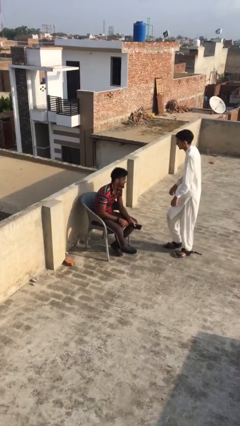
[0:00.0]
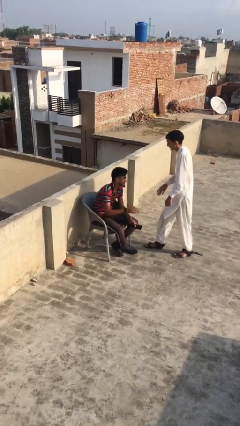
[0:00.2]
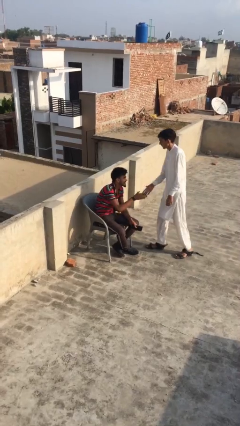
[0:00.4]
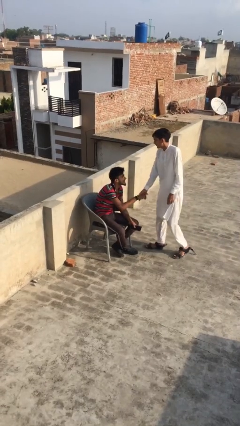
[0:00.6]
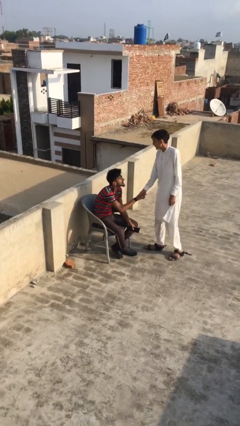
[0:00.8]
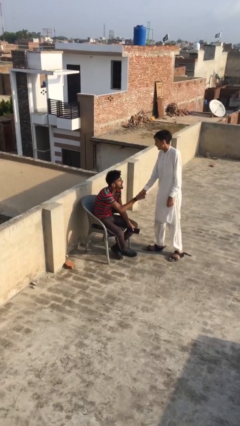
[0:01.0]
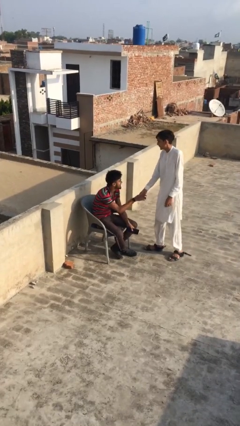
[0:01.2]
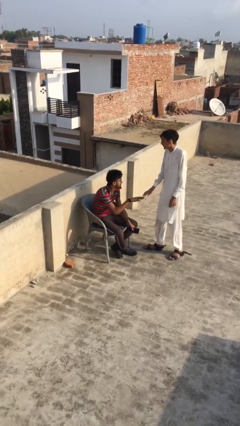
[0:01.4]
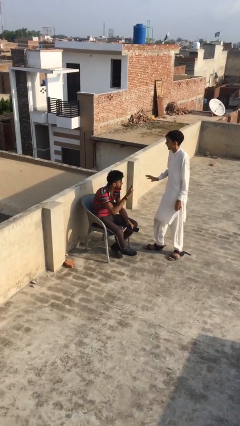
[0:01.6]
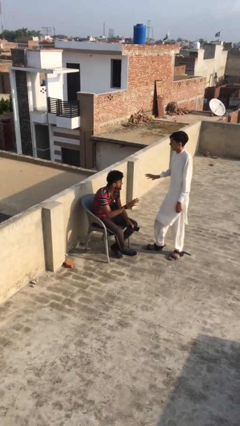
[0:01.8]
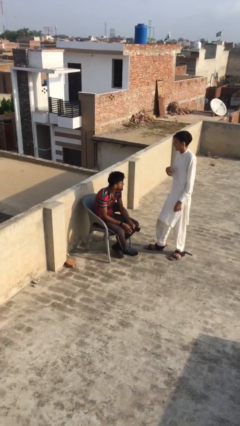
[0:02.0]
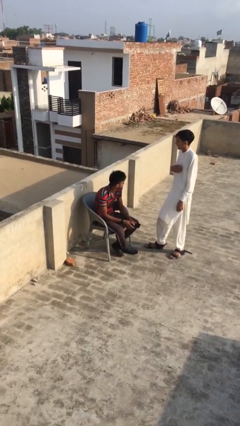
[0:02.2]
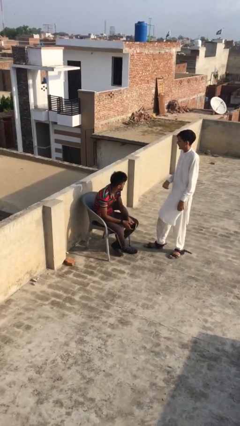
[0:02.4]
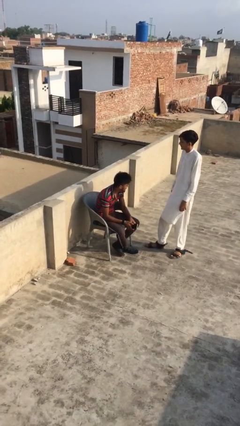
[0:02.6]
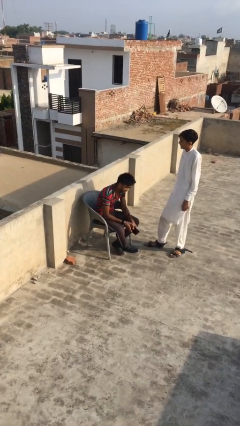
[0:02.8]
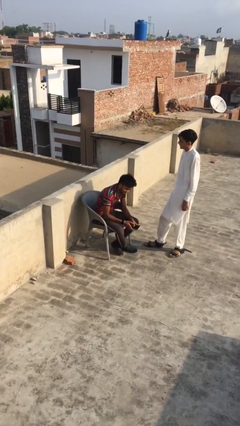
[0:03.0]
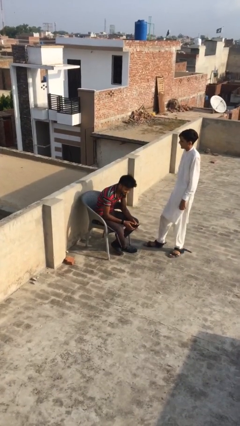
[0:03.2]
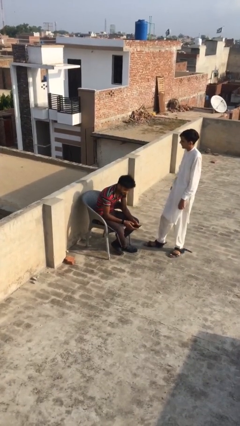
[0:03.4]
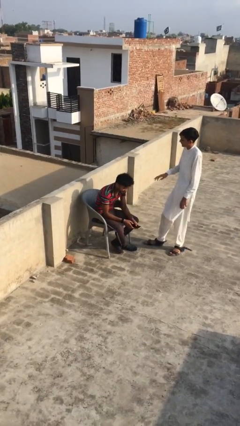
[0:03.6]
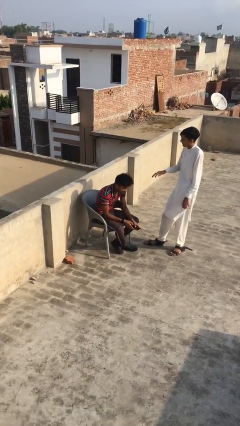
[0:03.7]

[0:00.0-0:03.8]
person shakes hand

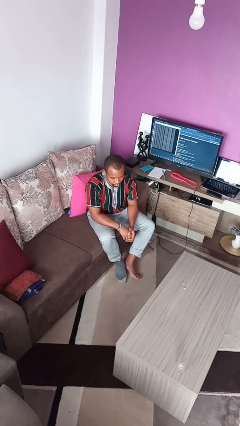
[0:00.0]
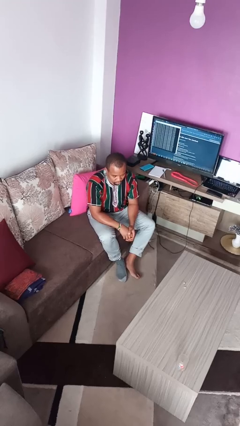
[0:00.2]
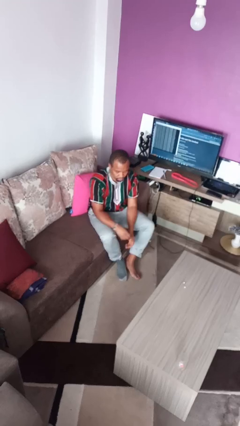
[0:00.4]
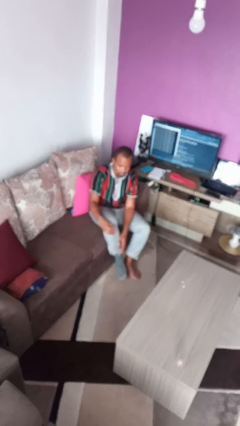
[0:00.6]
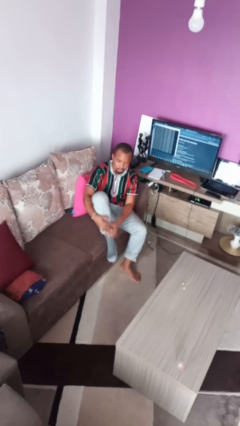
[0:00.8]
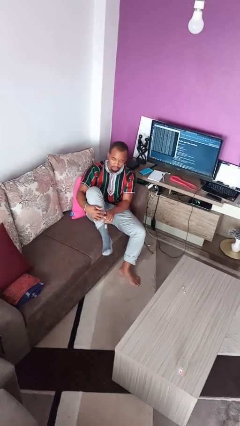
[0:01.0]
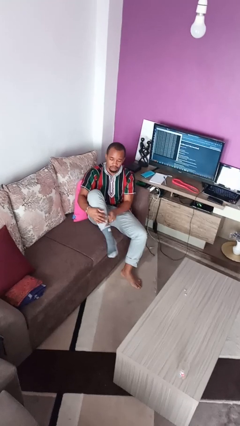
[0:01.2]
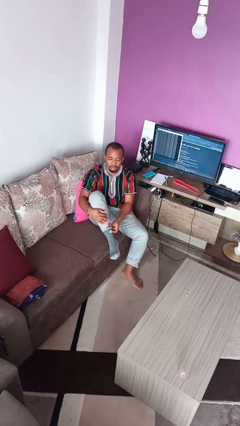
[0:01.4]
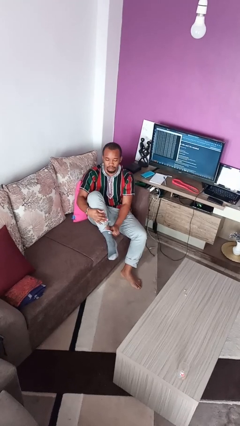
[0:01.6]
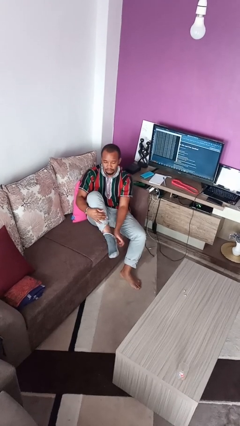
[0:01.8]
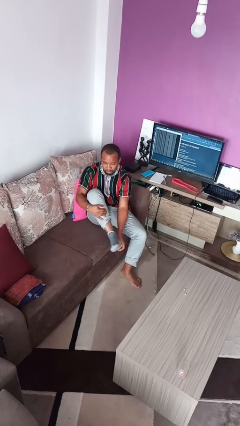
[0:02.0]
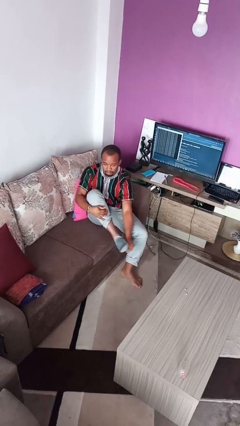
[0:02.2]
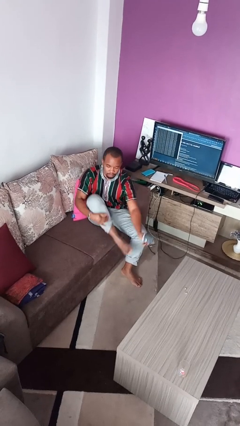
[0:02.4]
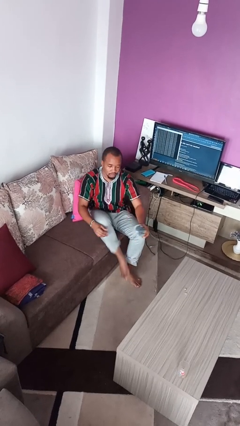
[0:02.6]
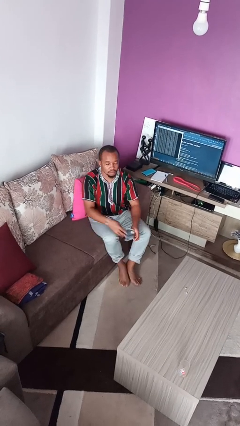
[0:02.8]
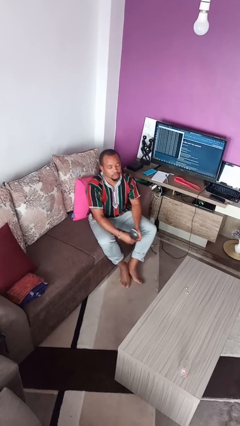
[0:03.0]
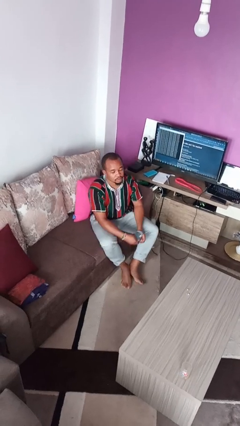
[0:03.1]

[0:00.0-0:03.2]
person takes off socks

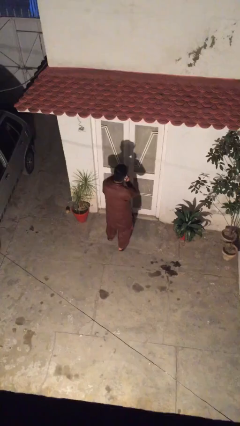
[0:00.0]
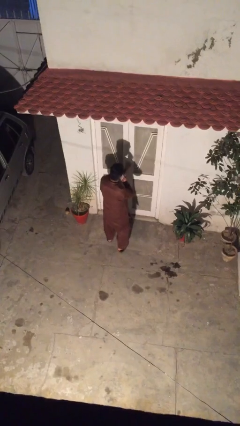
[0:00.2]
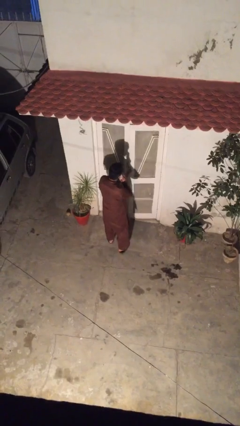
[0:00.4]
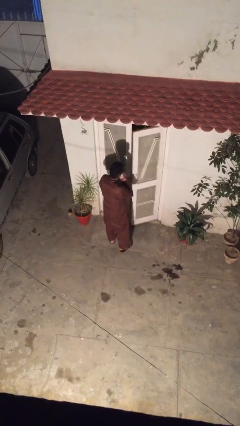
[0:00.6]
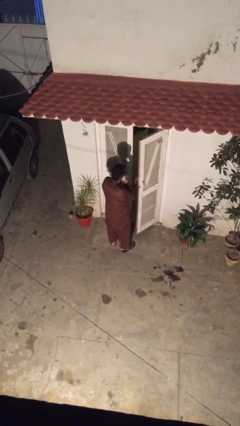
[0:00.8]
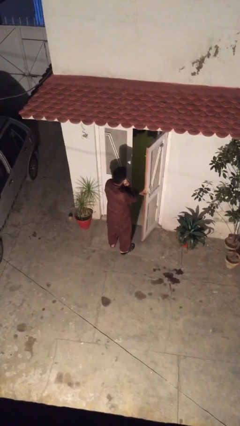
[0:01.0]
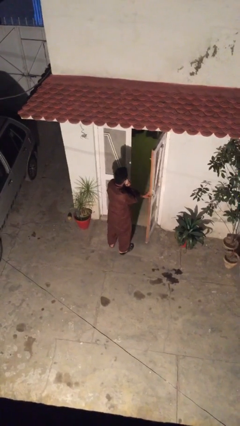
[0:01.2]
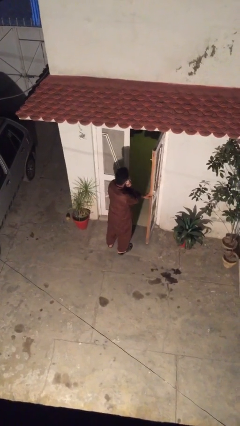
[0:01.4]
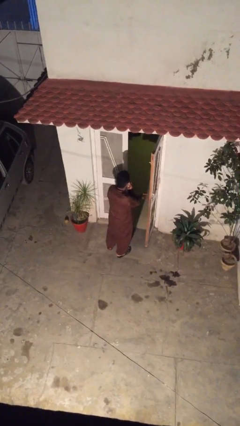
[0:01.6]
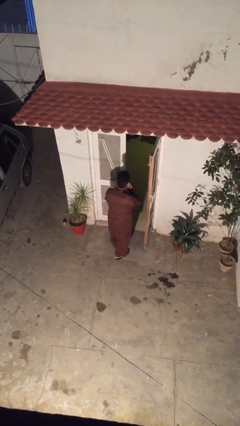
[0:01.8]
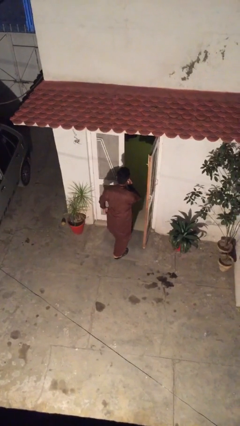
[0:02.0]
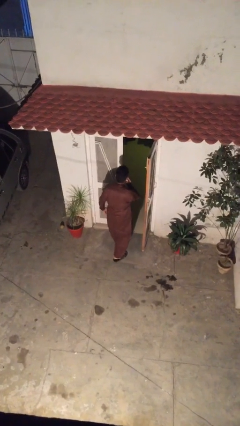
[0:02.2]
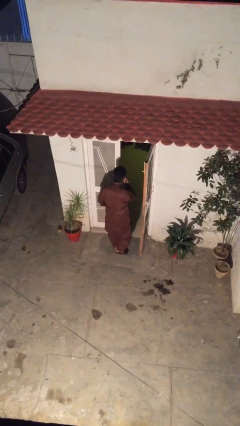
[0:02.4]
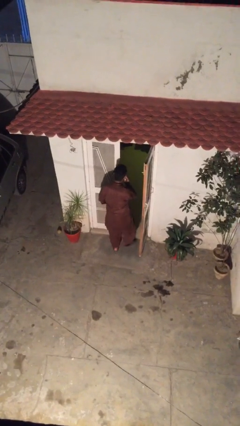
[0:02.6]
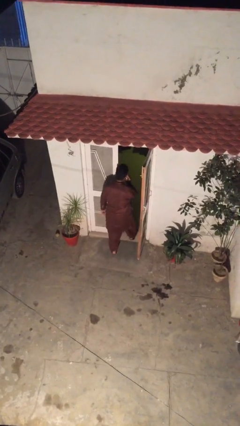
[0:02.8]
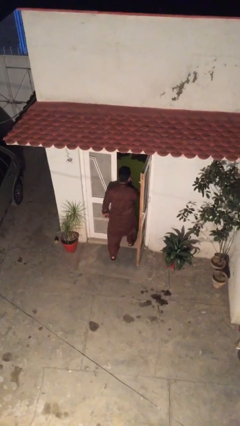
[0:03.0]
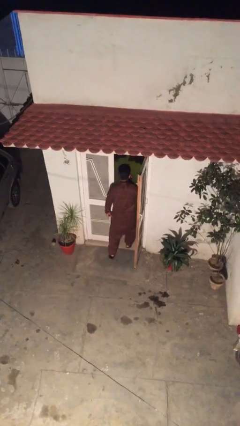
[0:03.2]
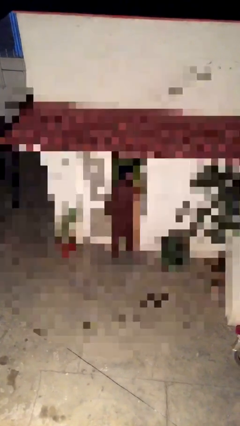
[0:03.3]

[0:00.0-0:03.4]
person opens facility door

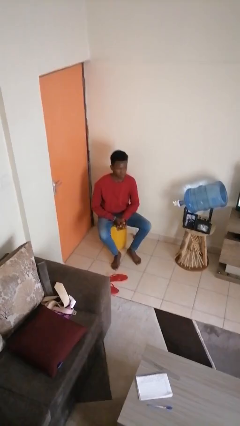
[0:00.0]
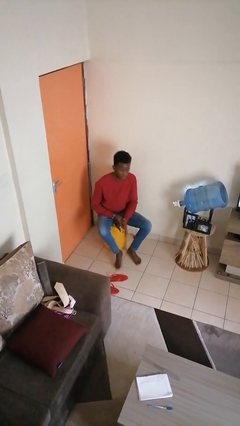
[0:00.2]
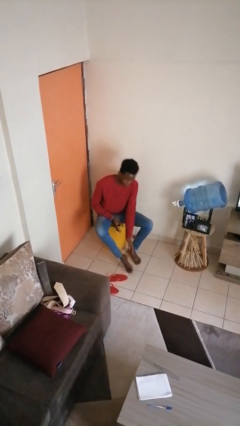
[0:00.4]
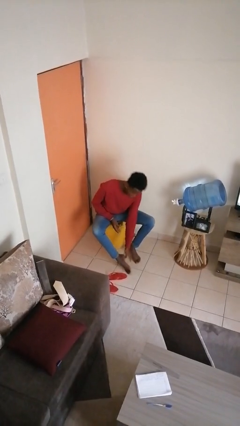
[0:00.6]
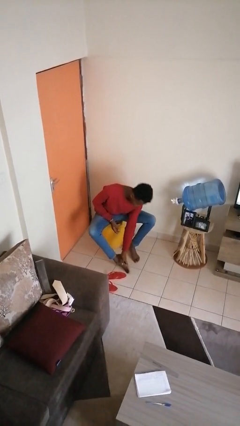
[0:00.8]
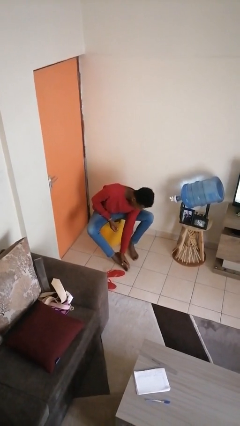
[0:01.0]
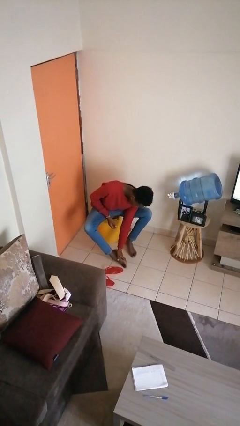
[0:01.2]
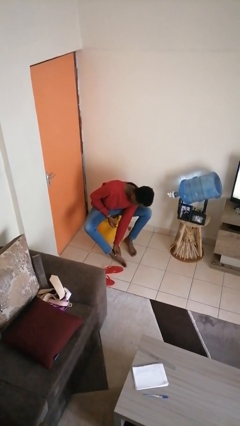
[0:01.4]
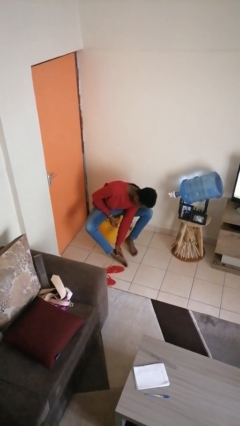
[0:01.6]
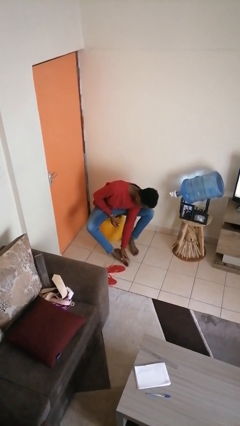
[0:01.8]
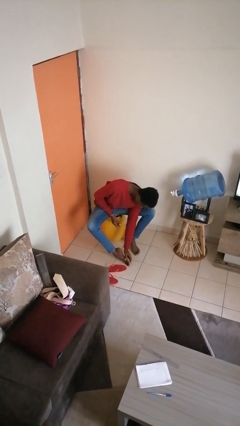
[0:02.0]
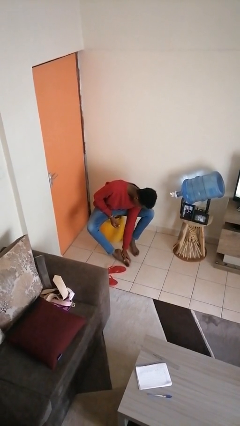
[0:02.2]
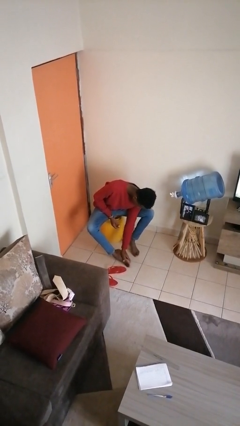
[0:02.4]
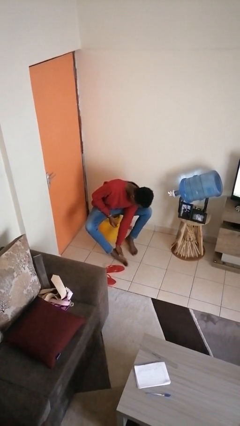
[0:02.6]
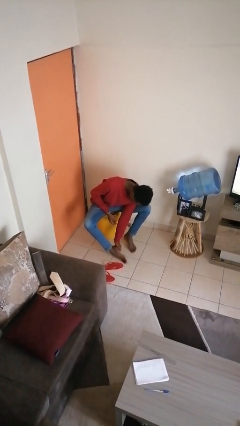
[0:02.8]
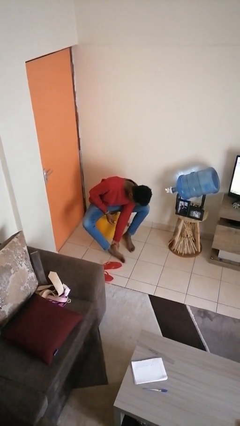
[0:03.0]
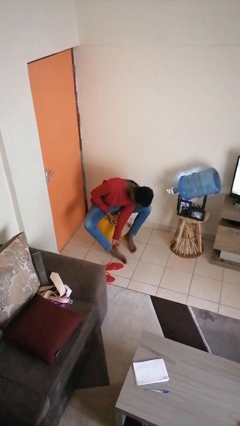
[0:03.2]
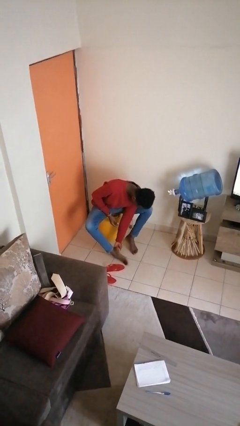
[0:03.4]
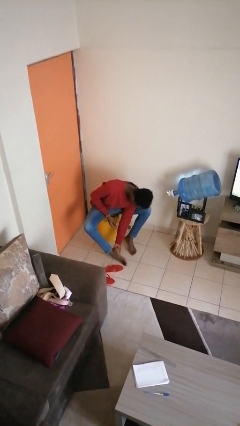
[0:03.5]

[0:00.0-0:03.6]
person rubs foot

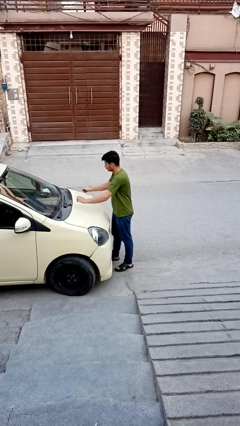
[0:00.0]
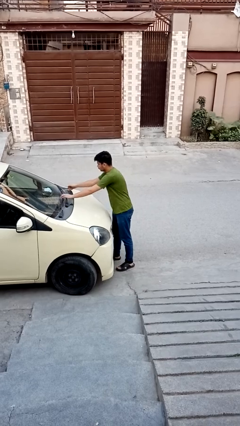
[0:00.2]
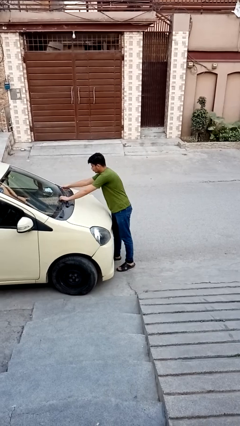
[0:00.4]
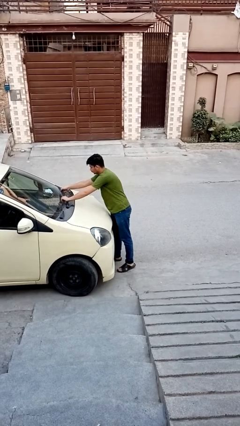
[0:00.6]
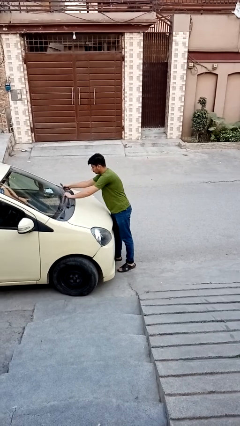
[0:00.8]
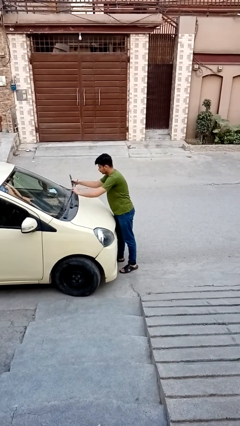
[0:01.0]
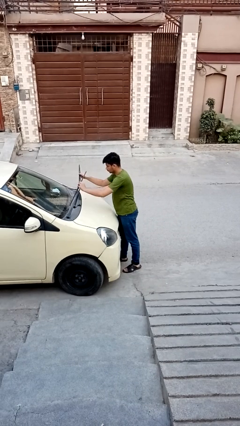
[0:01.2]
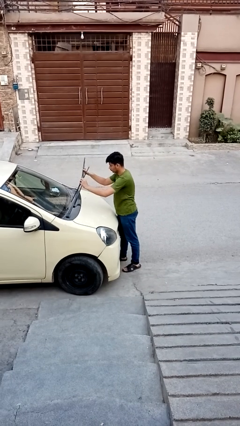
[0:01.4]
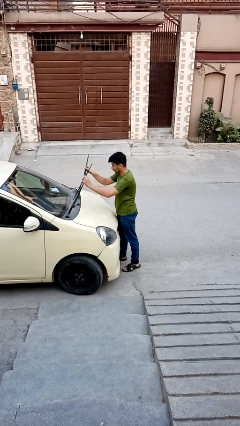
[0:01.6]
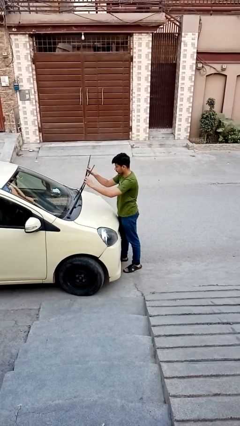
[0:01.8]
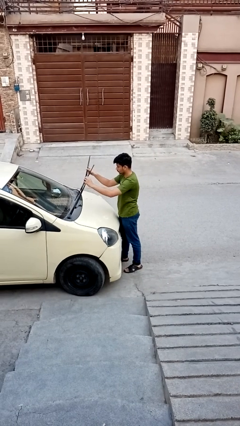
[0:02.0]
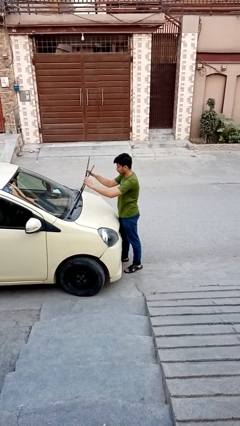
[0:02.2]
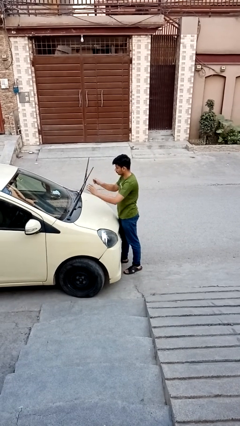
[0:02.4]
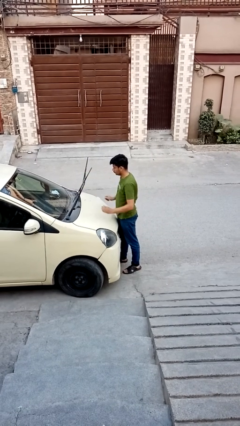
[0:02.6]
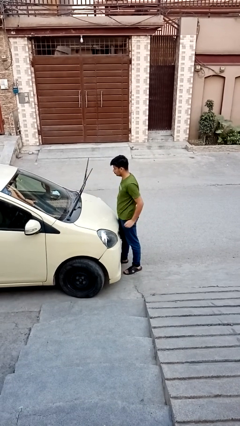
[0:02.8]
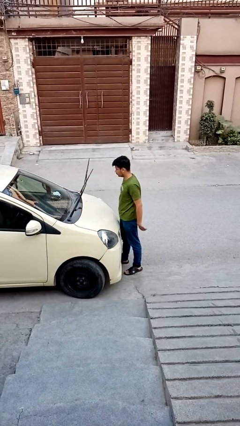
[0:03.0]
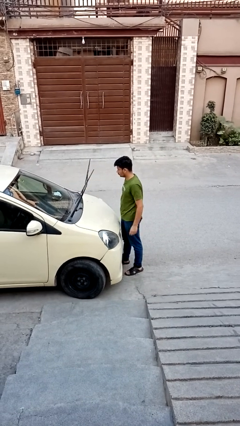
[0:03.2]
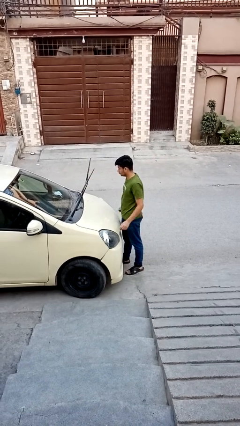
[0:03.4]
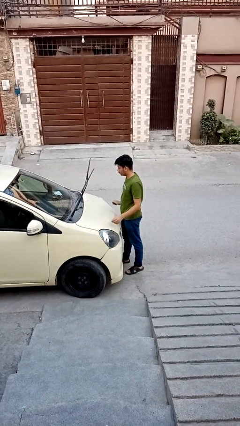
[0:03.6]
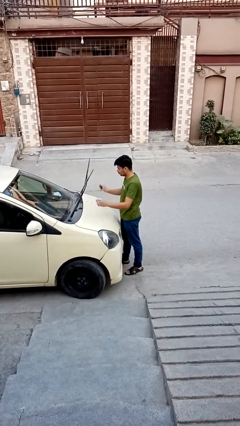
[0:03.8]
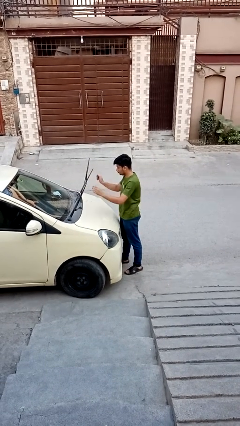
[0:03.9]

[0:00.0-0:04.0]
person flips up car wipers
